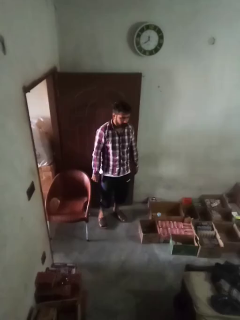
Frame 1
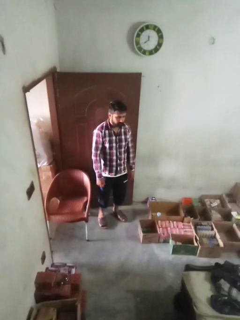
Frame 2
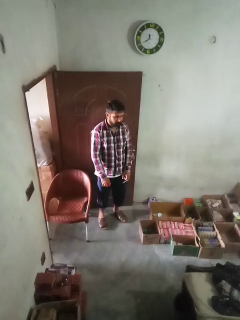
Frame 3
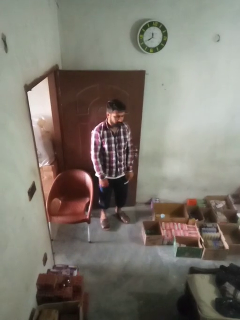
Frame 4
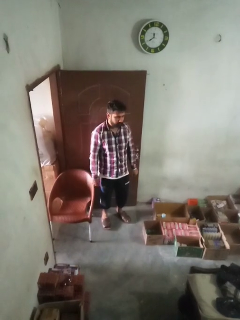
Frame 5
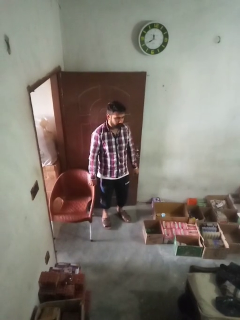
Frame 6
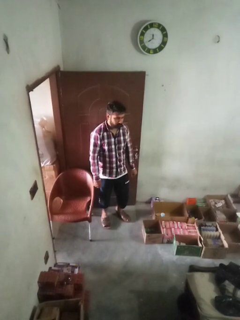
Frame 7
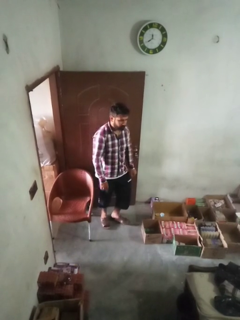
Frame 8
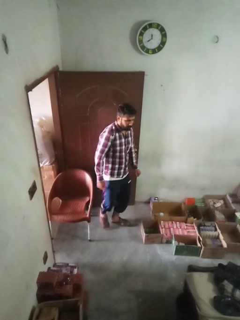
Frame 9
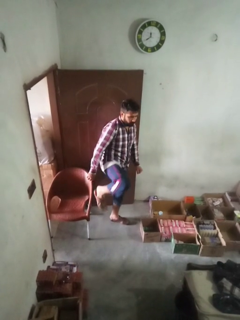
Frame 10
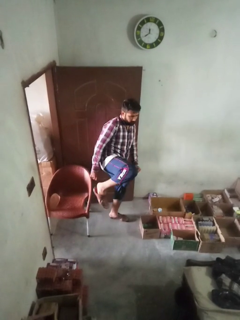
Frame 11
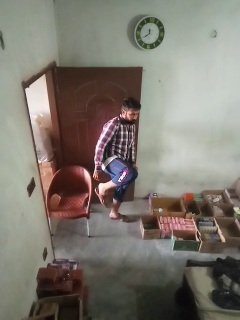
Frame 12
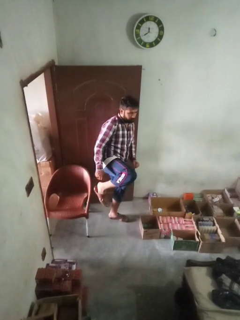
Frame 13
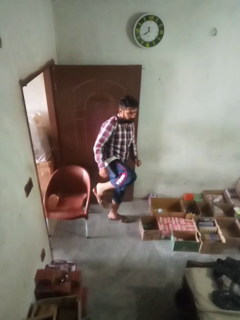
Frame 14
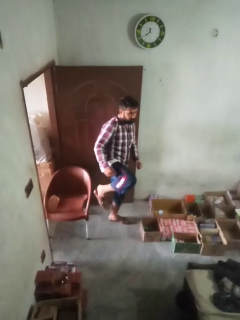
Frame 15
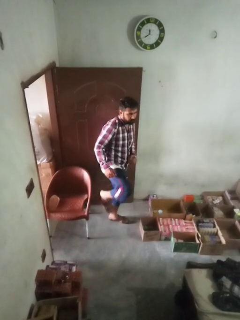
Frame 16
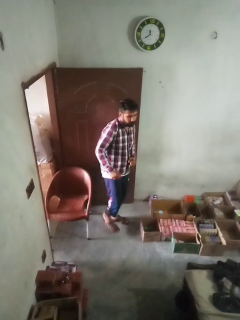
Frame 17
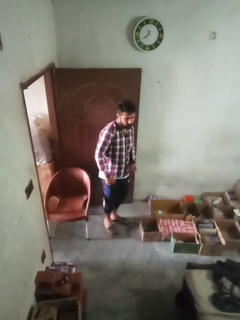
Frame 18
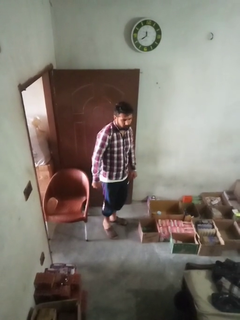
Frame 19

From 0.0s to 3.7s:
person karate kicks

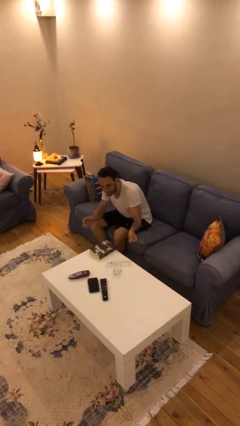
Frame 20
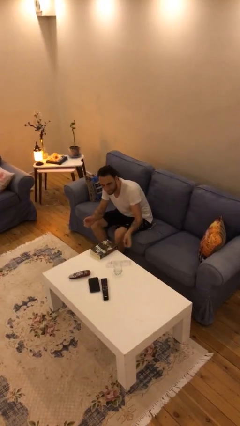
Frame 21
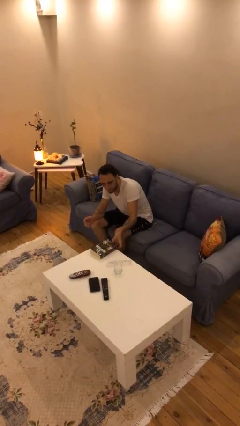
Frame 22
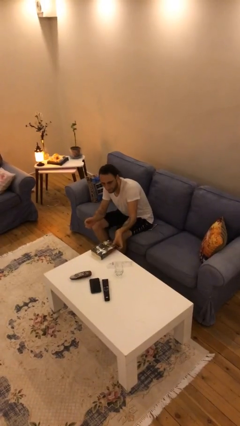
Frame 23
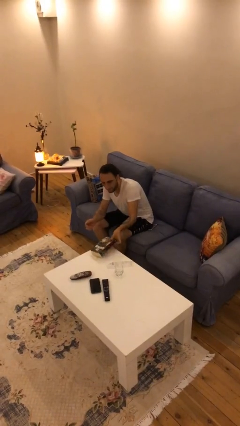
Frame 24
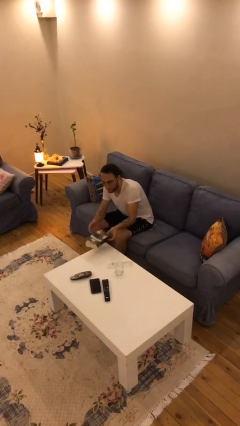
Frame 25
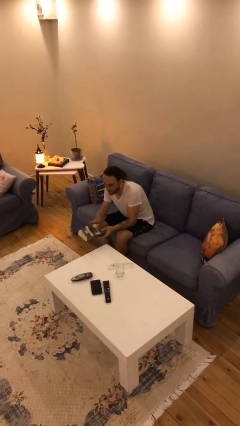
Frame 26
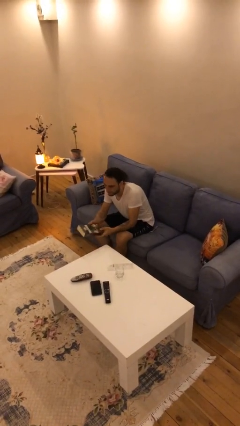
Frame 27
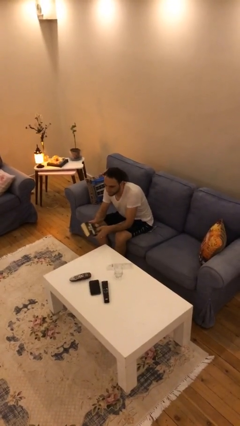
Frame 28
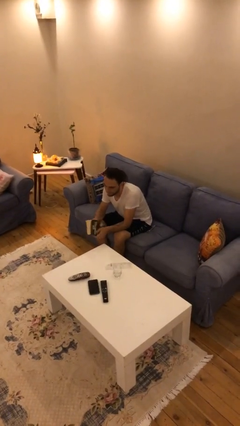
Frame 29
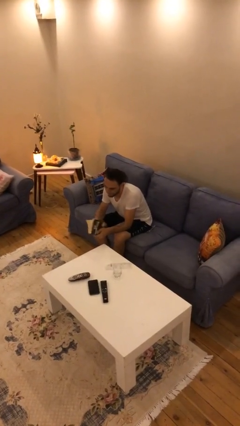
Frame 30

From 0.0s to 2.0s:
person picks up object from table

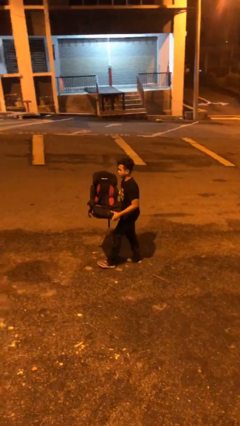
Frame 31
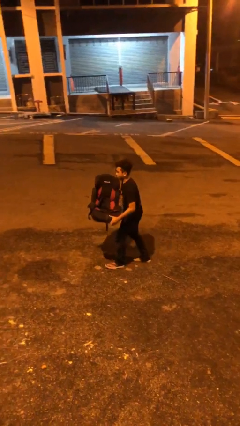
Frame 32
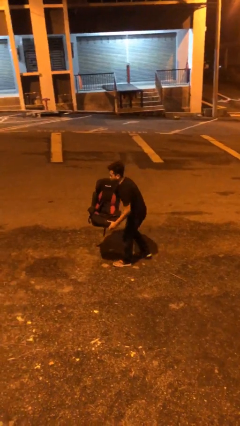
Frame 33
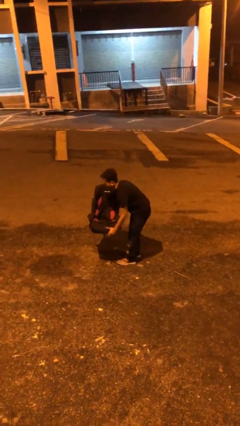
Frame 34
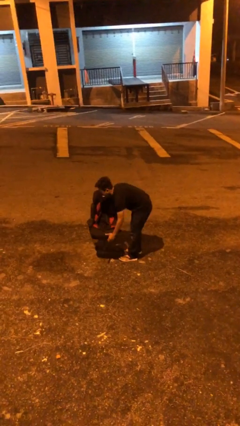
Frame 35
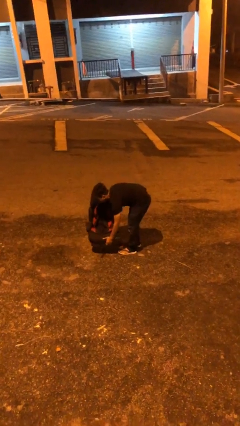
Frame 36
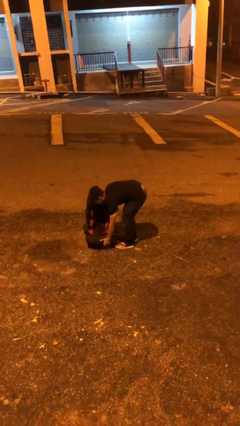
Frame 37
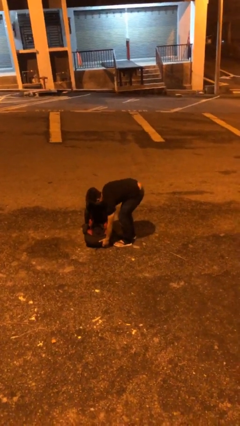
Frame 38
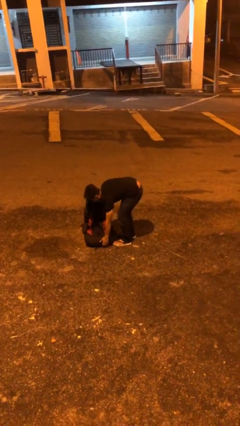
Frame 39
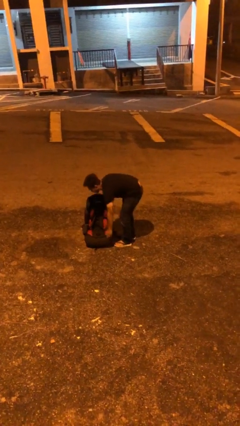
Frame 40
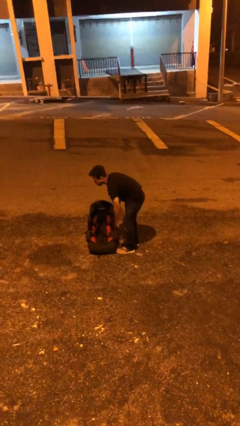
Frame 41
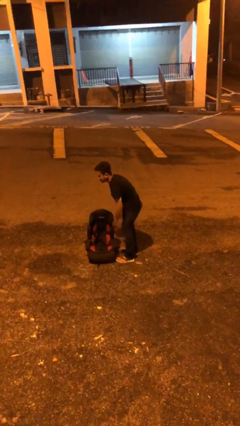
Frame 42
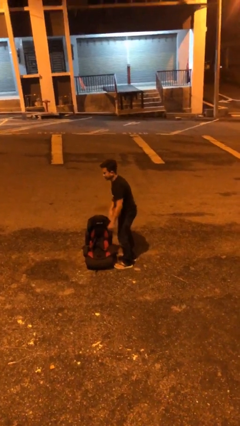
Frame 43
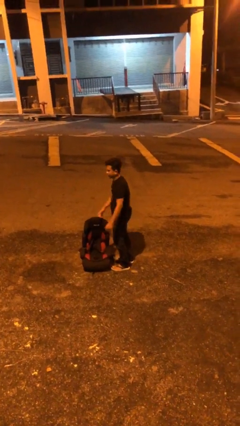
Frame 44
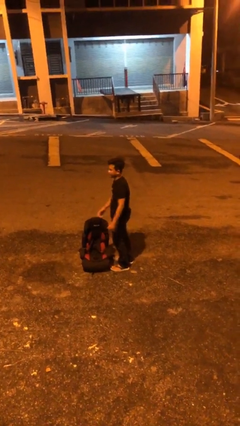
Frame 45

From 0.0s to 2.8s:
person puts down object on floor

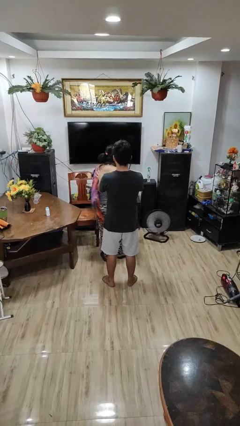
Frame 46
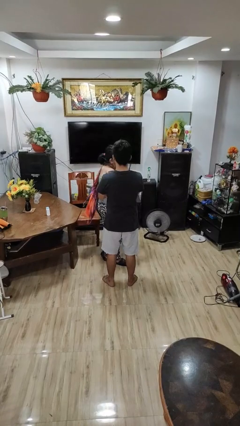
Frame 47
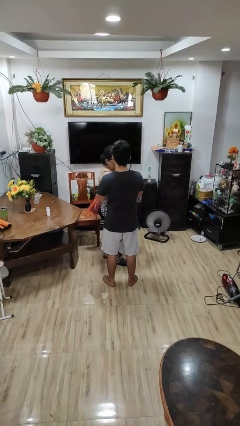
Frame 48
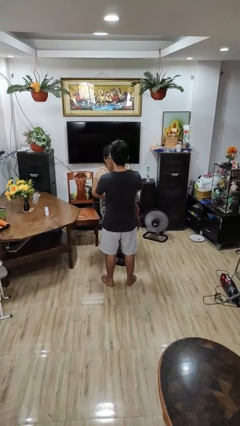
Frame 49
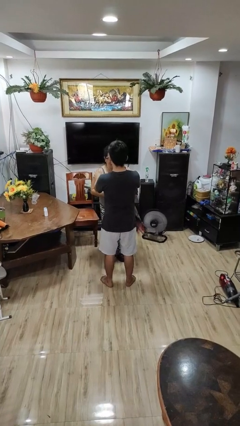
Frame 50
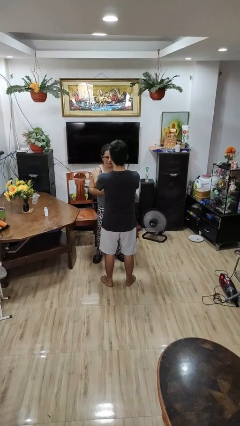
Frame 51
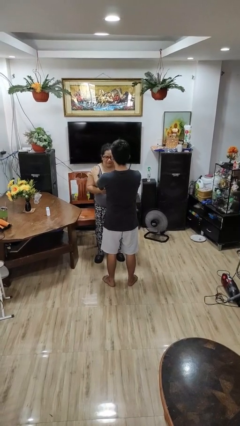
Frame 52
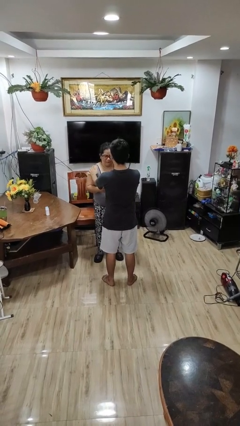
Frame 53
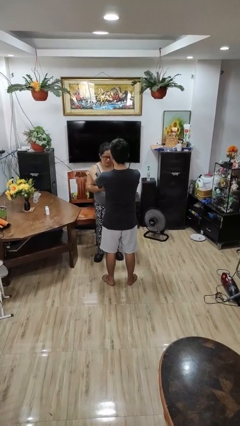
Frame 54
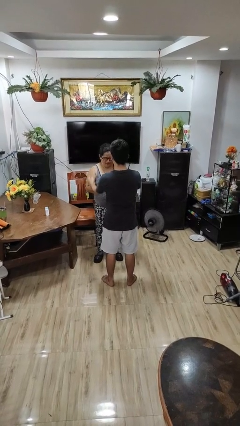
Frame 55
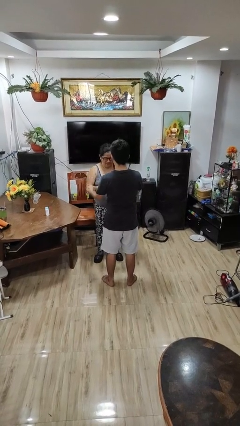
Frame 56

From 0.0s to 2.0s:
person spins person around

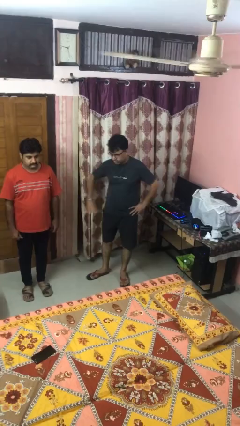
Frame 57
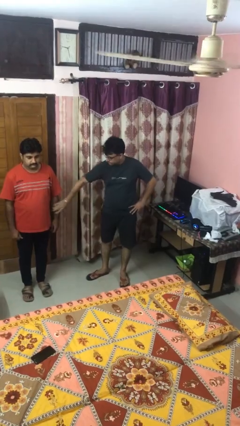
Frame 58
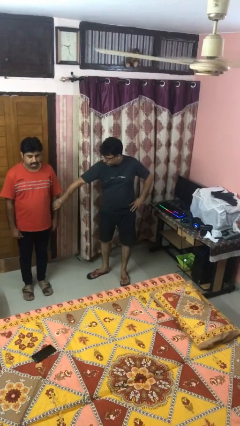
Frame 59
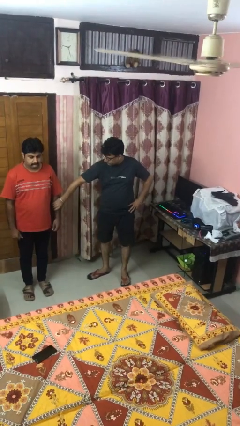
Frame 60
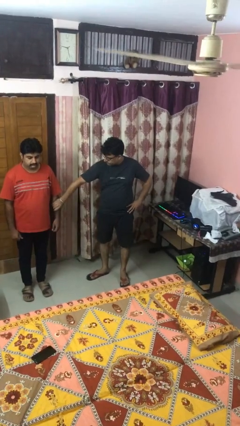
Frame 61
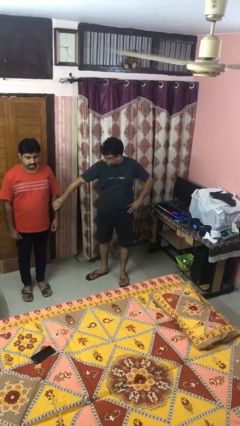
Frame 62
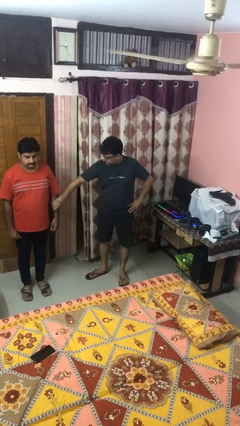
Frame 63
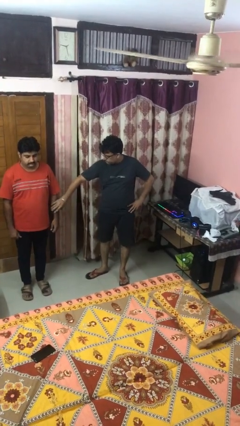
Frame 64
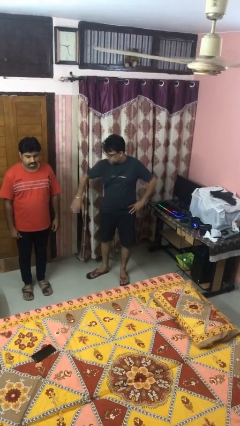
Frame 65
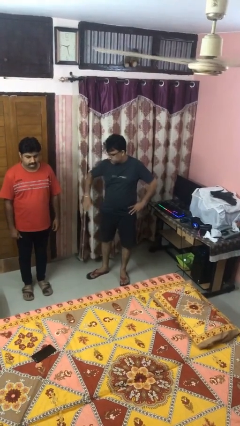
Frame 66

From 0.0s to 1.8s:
person grabs person by forearm

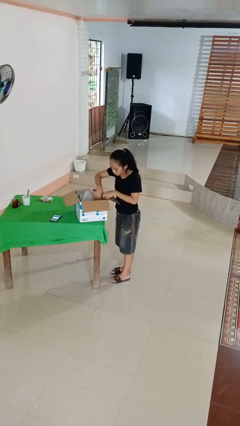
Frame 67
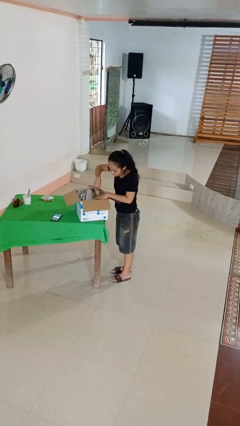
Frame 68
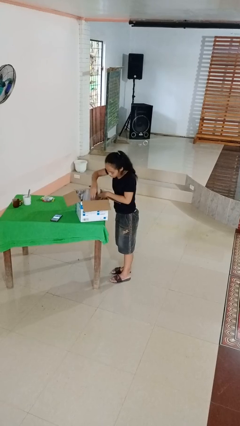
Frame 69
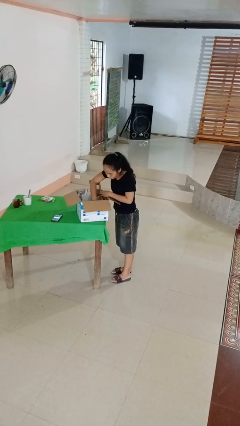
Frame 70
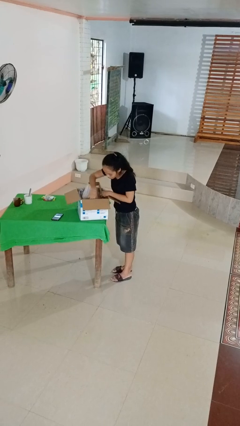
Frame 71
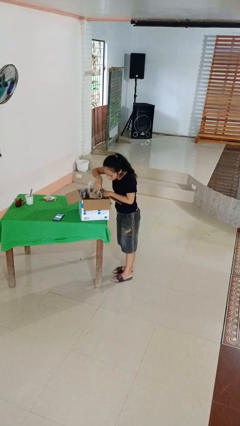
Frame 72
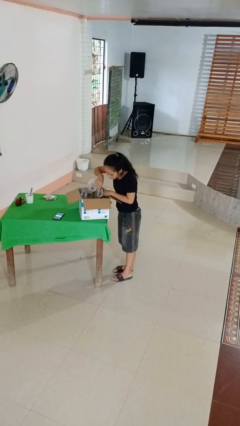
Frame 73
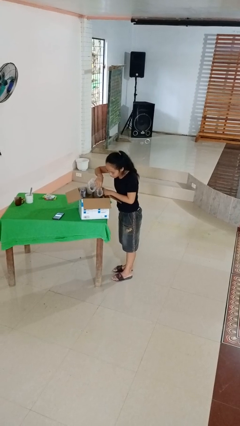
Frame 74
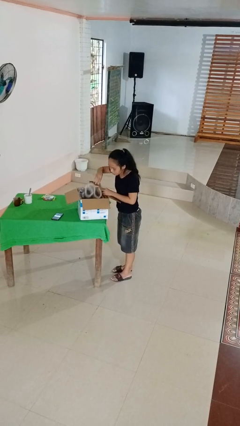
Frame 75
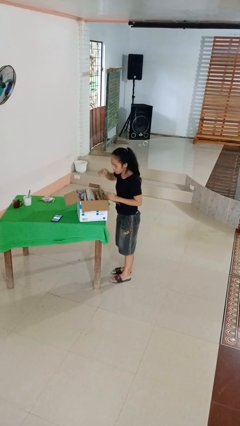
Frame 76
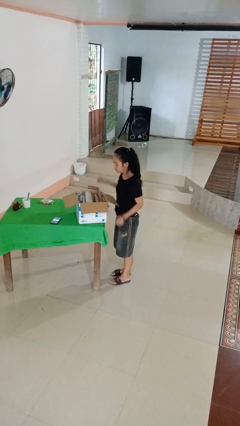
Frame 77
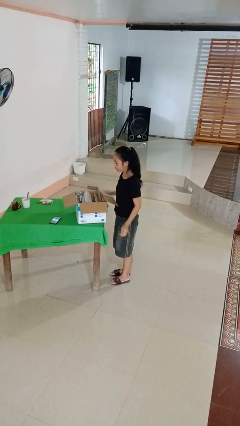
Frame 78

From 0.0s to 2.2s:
person searches in box

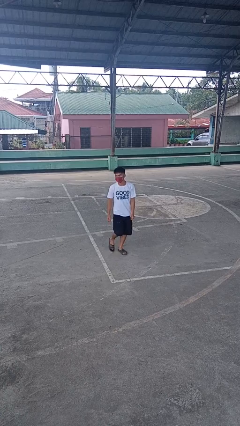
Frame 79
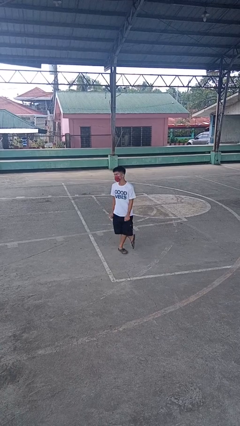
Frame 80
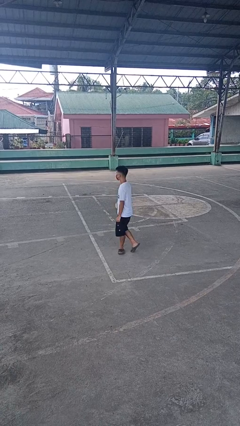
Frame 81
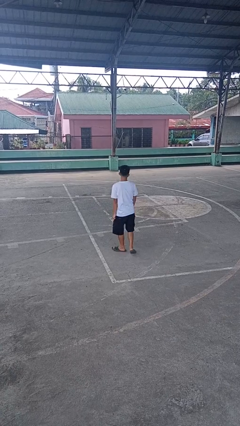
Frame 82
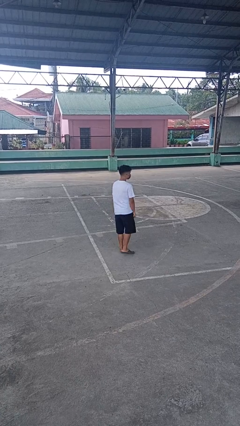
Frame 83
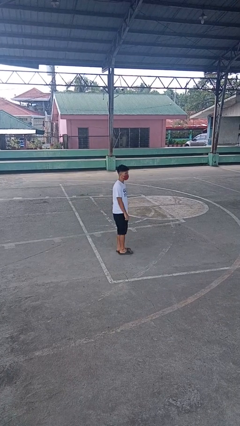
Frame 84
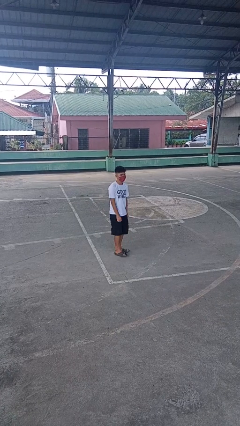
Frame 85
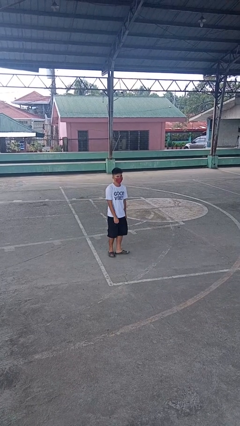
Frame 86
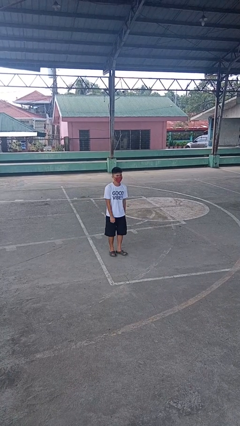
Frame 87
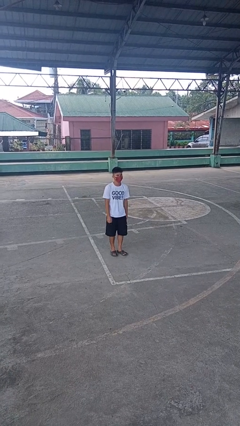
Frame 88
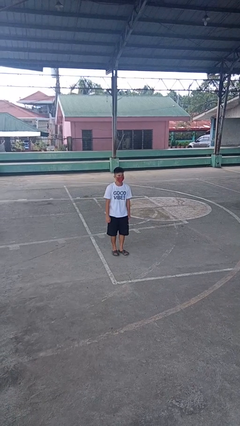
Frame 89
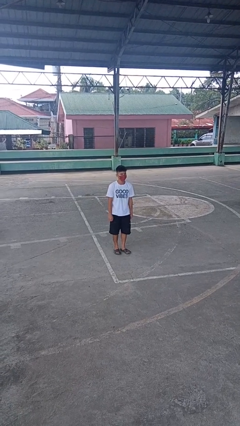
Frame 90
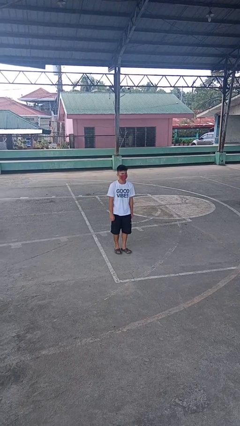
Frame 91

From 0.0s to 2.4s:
person twirls

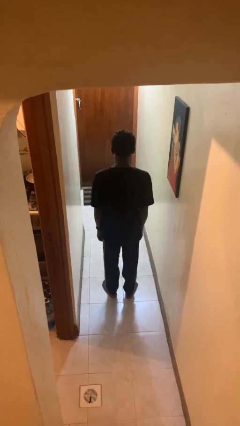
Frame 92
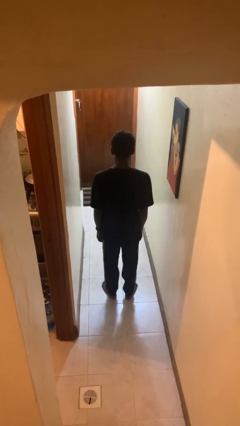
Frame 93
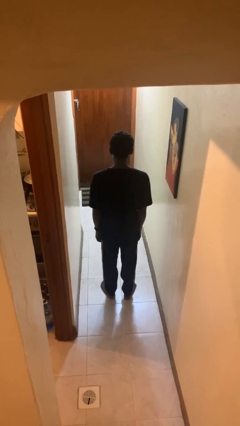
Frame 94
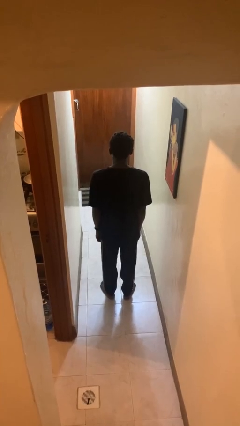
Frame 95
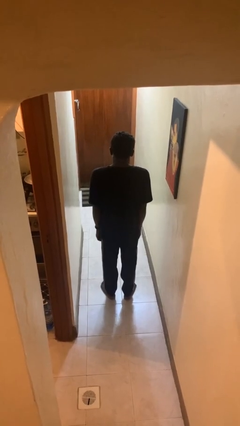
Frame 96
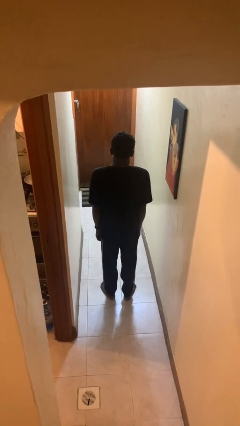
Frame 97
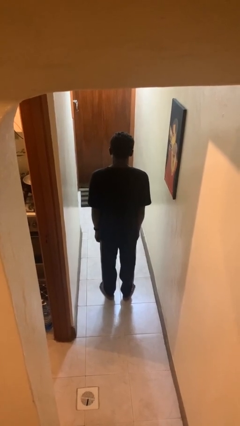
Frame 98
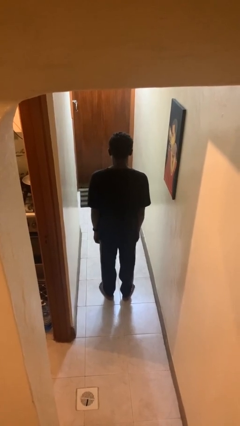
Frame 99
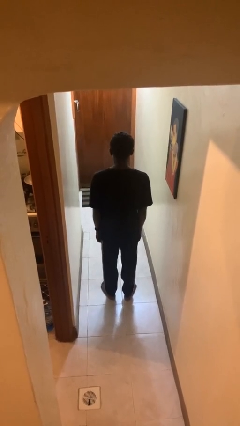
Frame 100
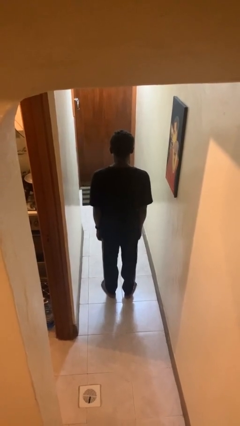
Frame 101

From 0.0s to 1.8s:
person shrugs
